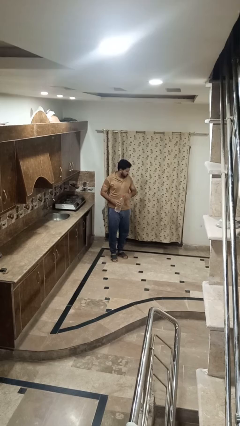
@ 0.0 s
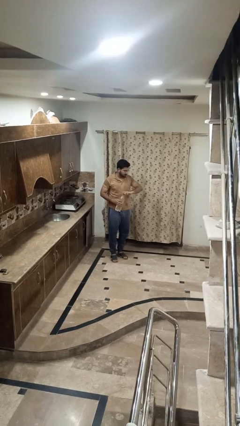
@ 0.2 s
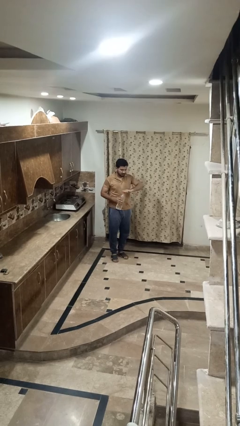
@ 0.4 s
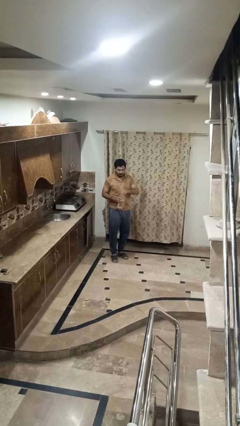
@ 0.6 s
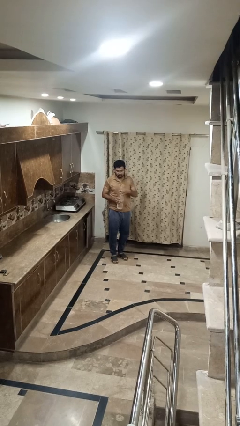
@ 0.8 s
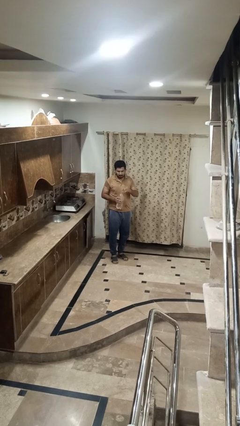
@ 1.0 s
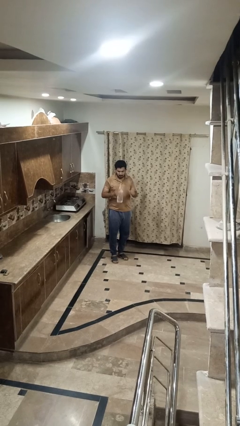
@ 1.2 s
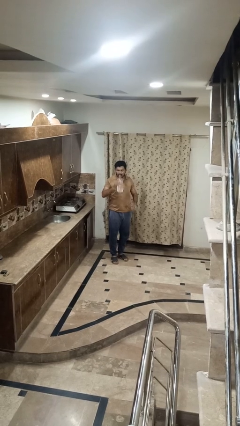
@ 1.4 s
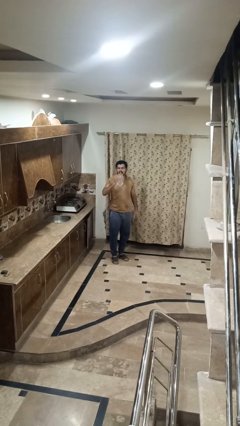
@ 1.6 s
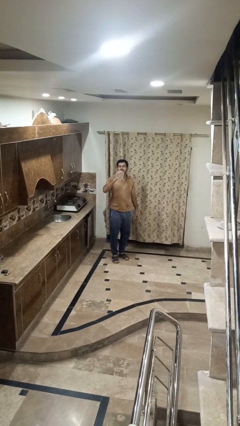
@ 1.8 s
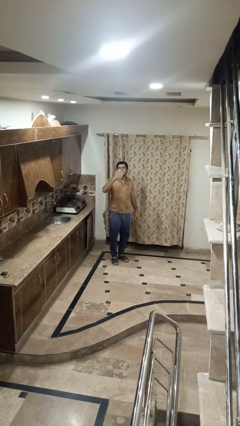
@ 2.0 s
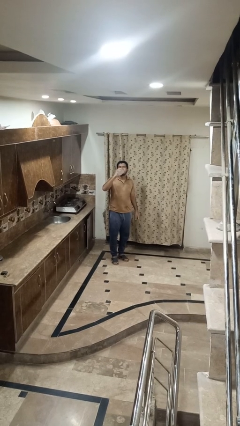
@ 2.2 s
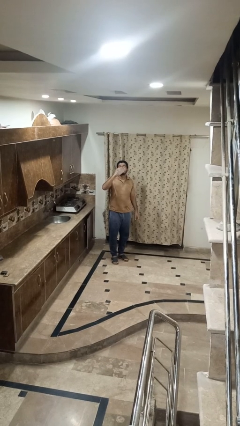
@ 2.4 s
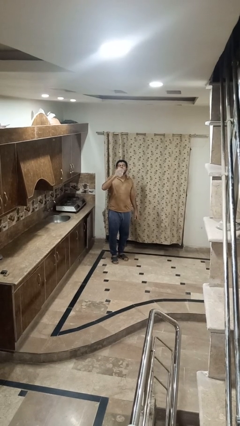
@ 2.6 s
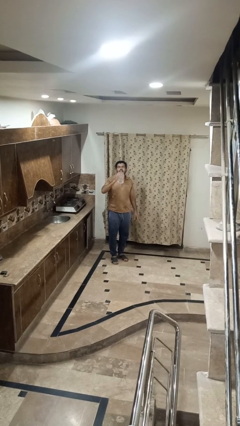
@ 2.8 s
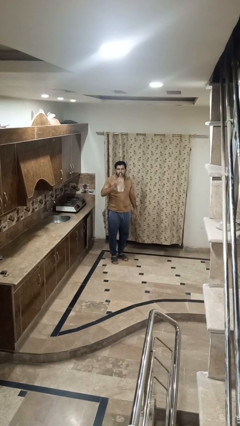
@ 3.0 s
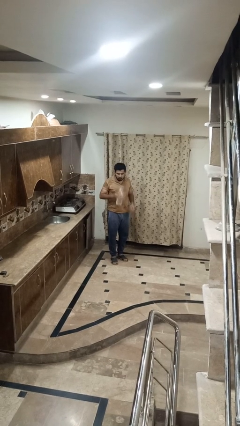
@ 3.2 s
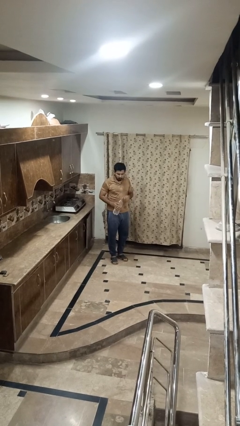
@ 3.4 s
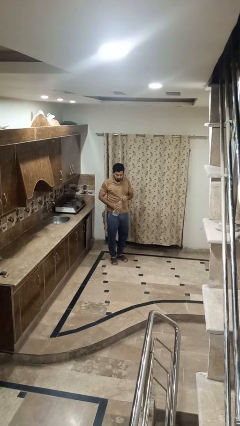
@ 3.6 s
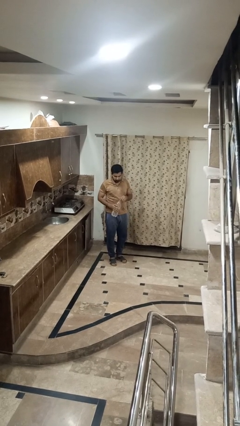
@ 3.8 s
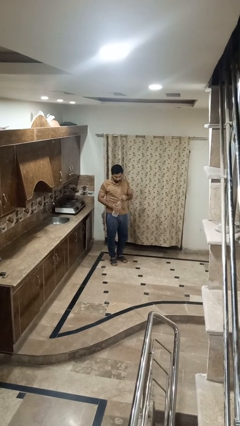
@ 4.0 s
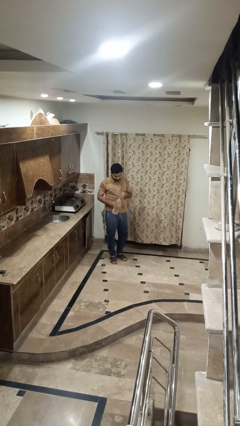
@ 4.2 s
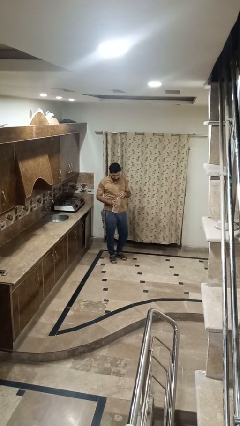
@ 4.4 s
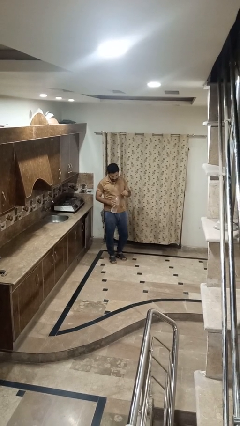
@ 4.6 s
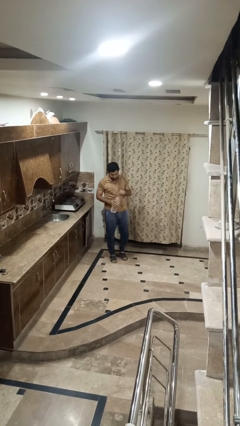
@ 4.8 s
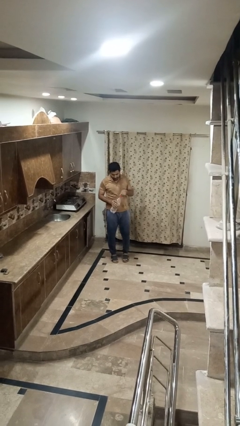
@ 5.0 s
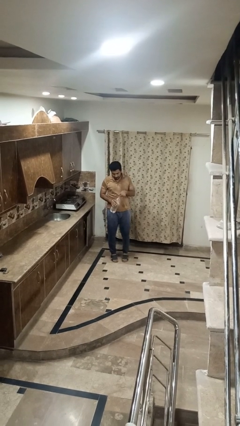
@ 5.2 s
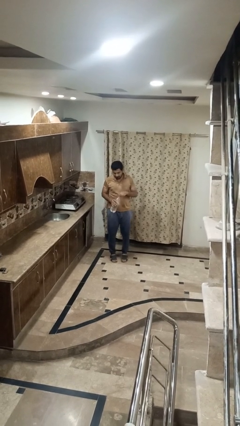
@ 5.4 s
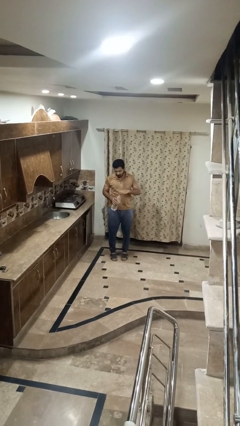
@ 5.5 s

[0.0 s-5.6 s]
person drinks from bottle

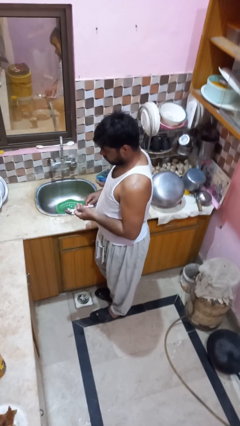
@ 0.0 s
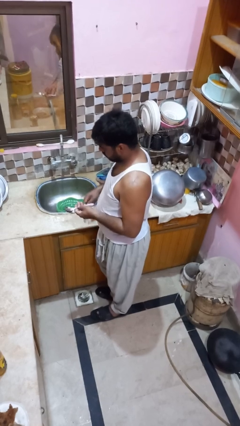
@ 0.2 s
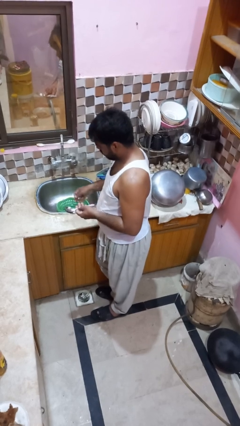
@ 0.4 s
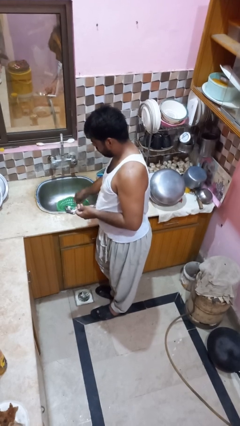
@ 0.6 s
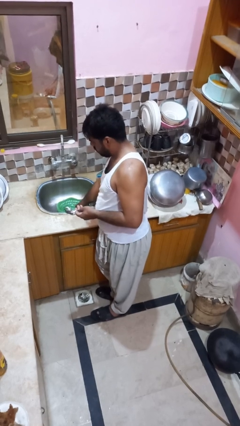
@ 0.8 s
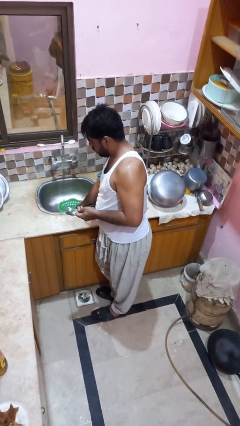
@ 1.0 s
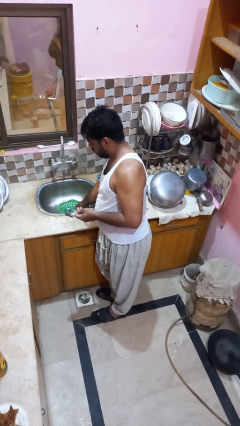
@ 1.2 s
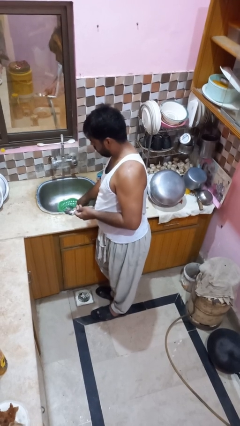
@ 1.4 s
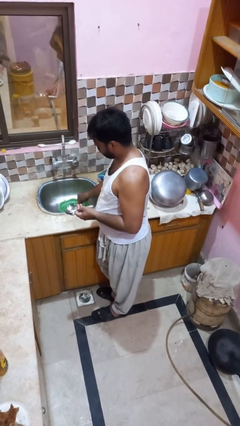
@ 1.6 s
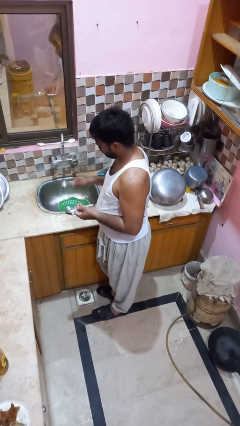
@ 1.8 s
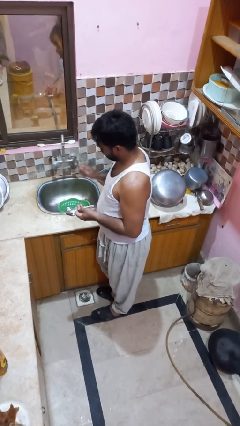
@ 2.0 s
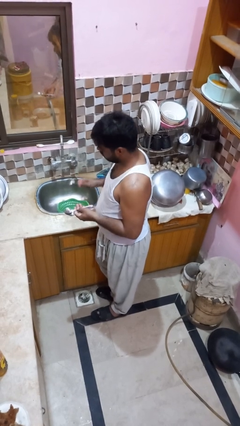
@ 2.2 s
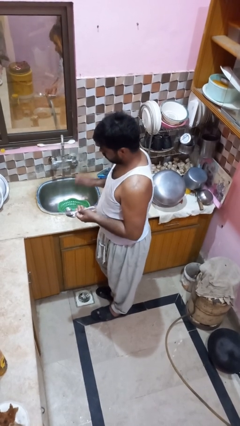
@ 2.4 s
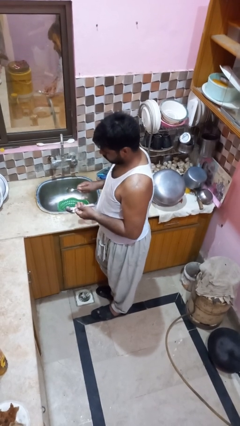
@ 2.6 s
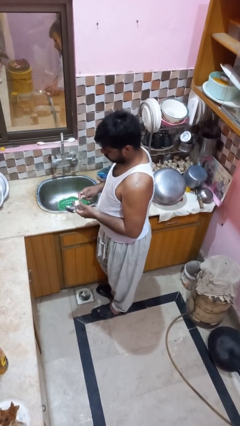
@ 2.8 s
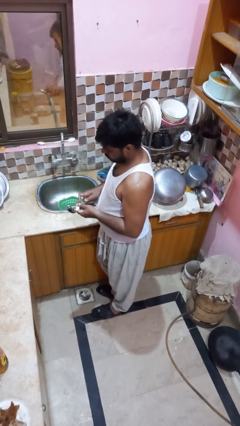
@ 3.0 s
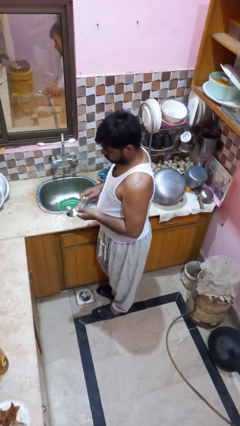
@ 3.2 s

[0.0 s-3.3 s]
person unloads dishwasher

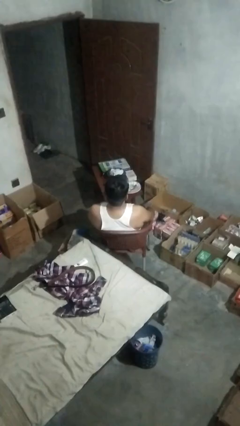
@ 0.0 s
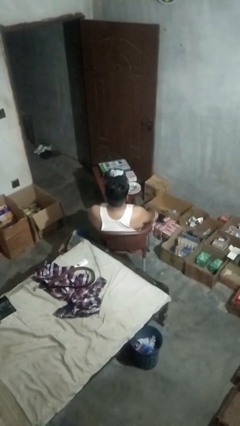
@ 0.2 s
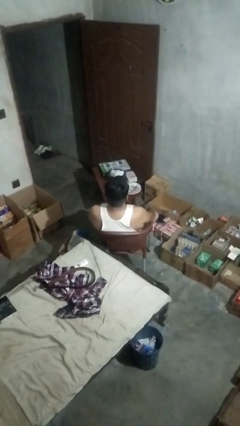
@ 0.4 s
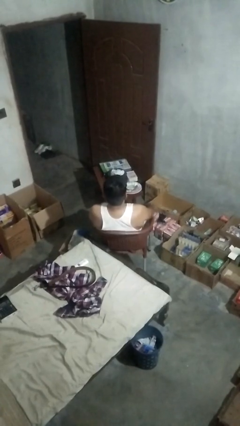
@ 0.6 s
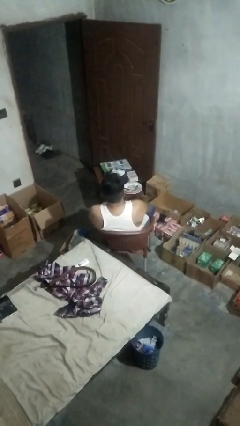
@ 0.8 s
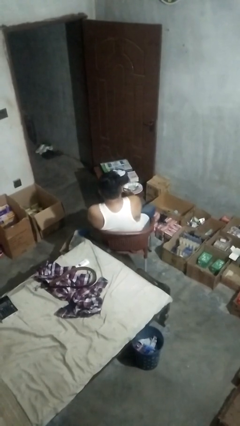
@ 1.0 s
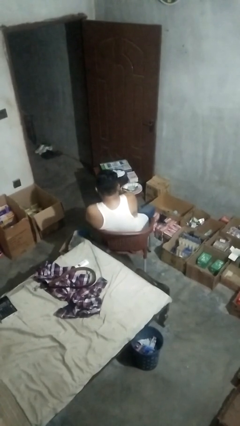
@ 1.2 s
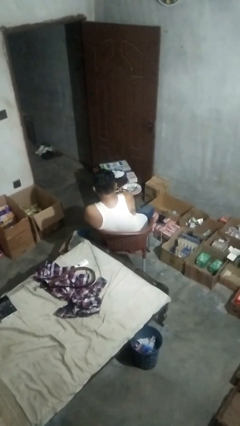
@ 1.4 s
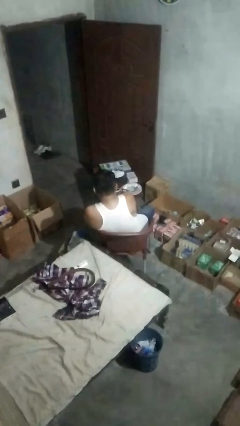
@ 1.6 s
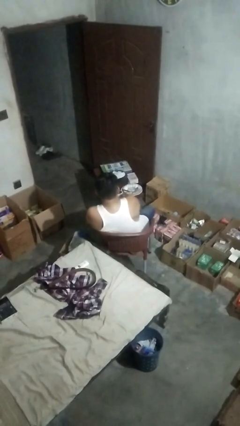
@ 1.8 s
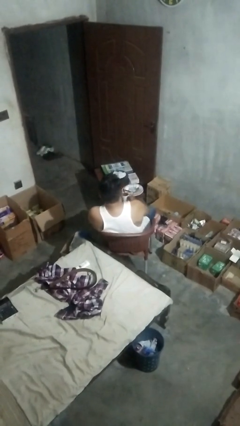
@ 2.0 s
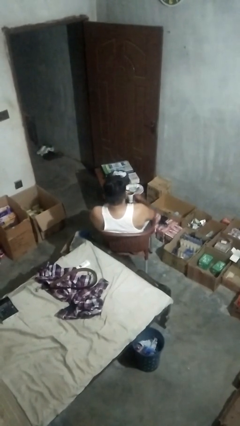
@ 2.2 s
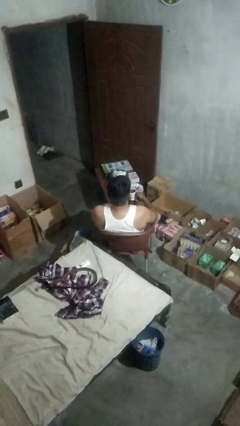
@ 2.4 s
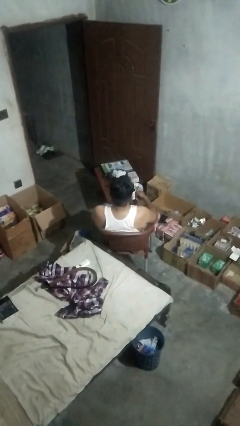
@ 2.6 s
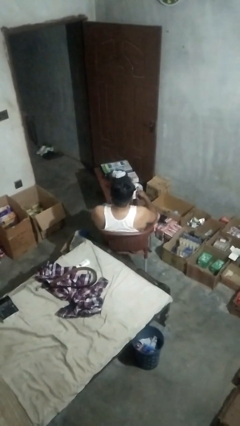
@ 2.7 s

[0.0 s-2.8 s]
person picks up object from table

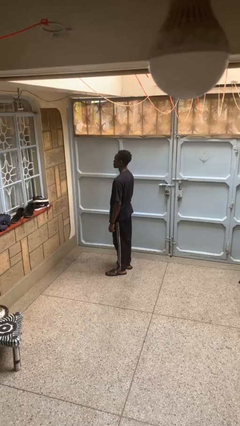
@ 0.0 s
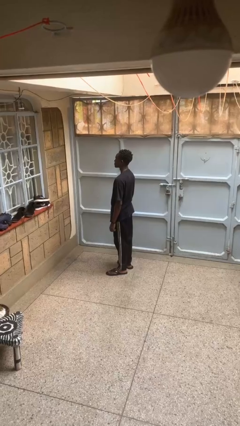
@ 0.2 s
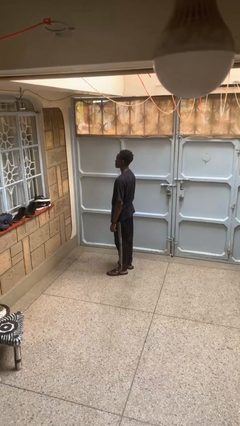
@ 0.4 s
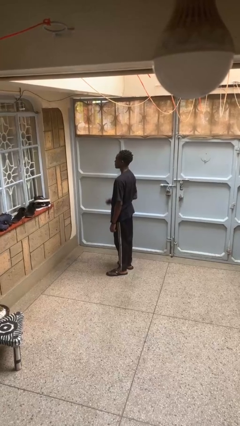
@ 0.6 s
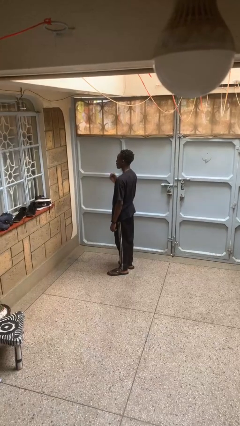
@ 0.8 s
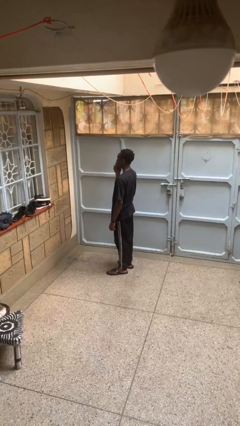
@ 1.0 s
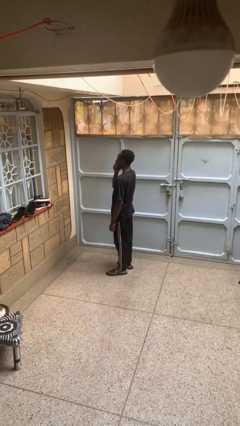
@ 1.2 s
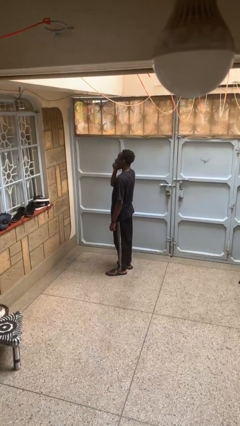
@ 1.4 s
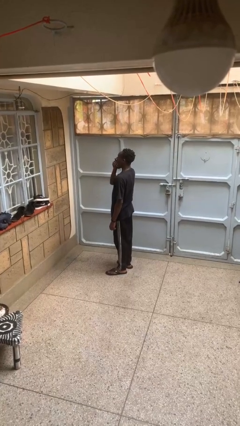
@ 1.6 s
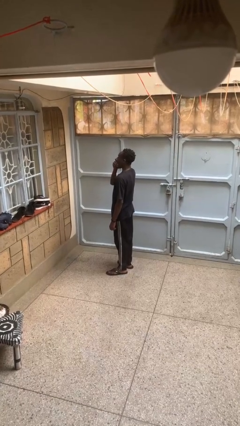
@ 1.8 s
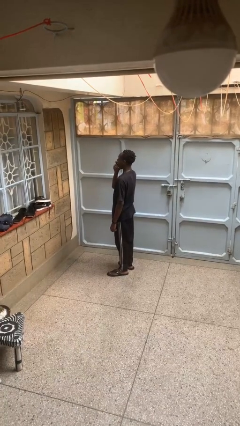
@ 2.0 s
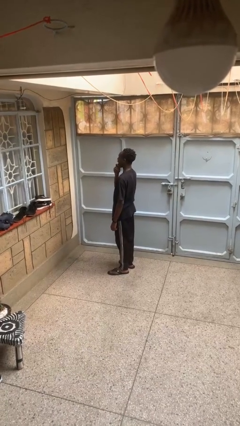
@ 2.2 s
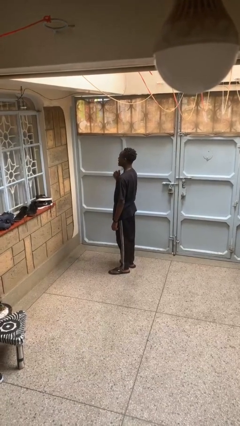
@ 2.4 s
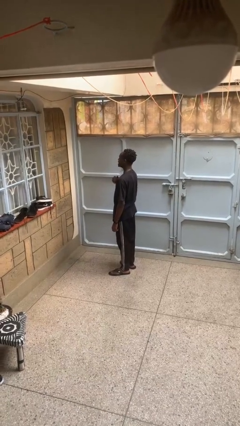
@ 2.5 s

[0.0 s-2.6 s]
person yawns

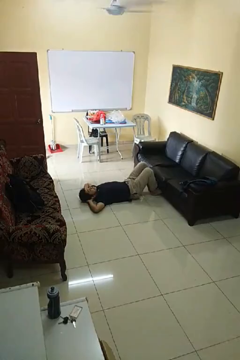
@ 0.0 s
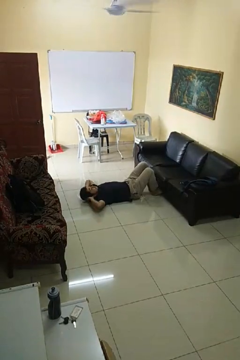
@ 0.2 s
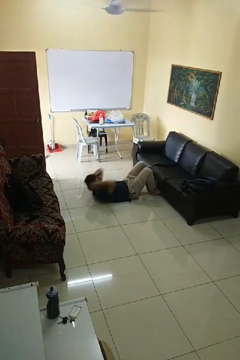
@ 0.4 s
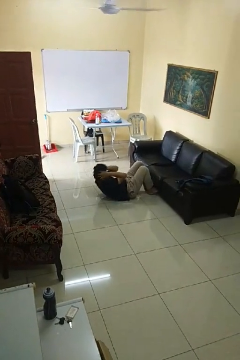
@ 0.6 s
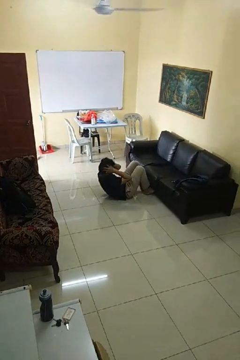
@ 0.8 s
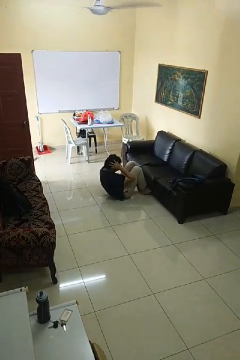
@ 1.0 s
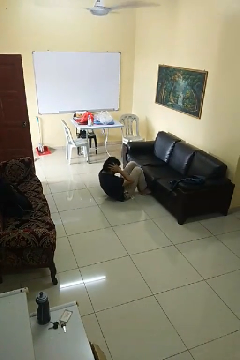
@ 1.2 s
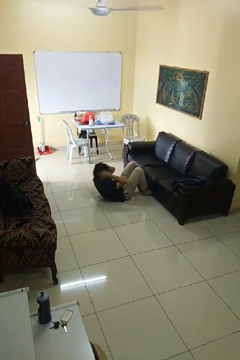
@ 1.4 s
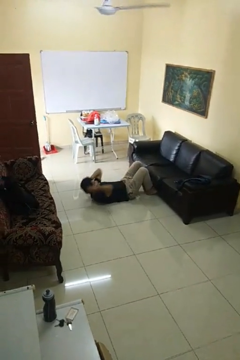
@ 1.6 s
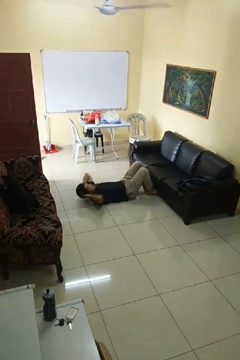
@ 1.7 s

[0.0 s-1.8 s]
person exercises with situp

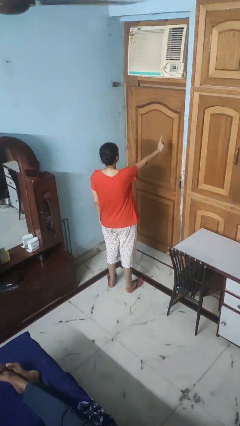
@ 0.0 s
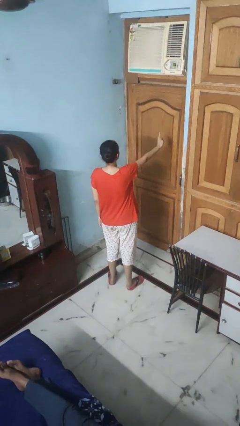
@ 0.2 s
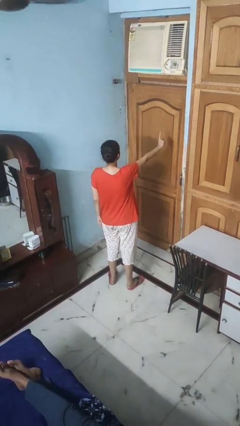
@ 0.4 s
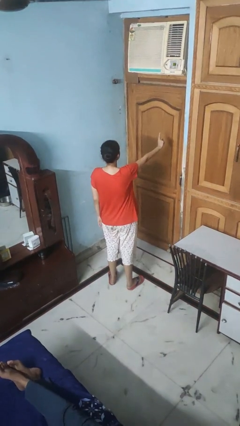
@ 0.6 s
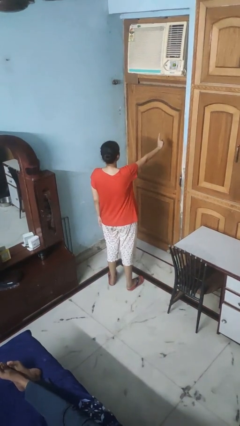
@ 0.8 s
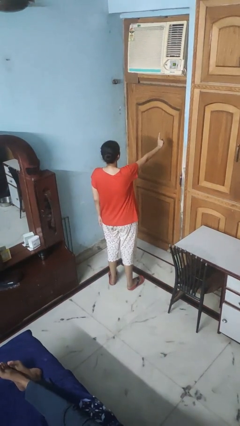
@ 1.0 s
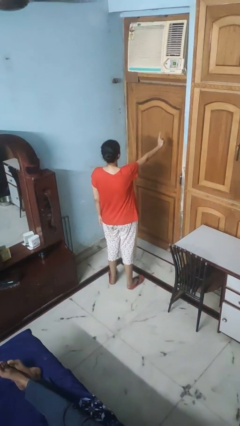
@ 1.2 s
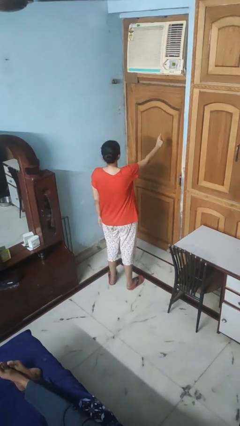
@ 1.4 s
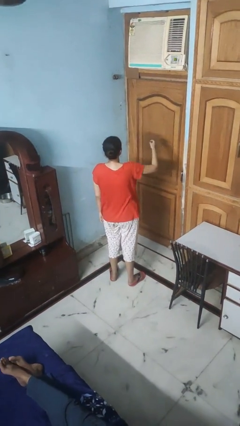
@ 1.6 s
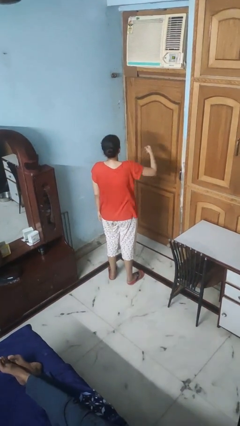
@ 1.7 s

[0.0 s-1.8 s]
person gestures number one
